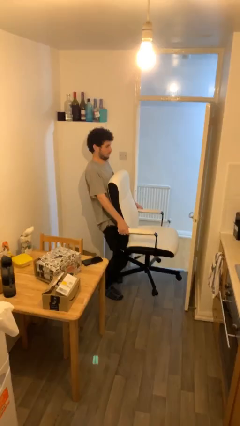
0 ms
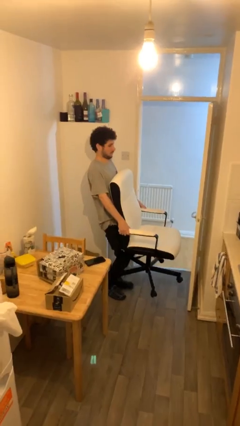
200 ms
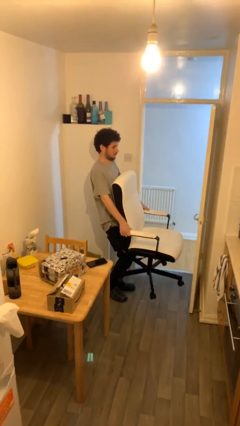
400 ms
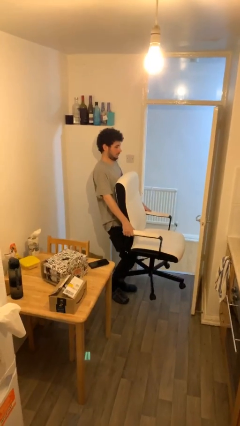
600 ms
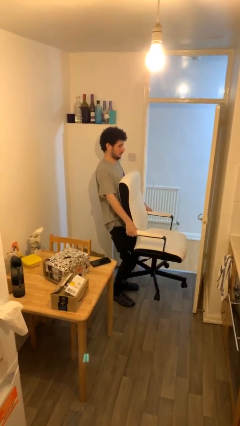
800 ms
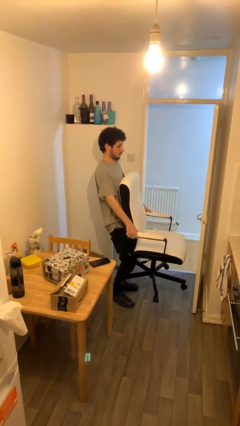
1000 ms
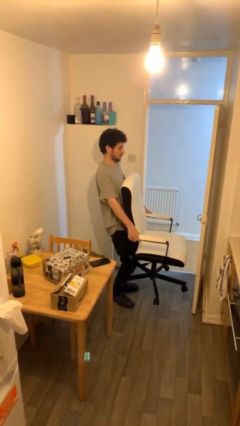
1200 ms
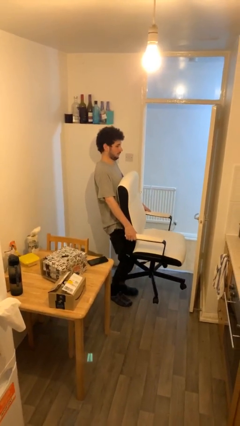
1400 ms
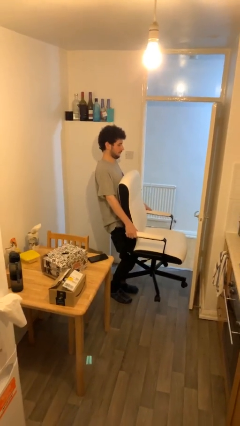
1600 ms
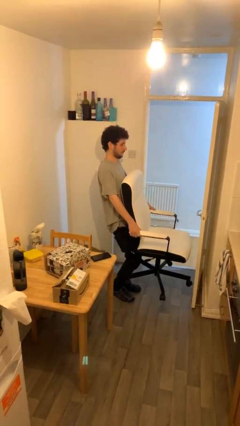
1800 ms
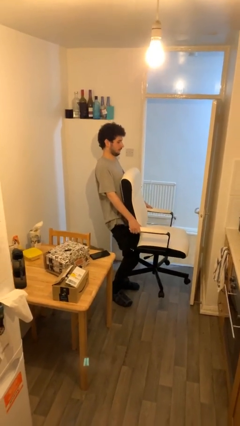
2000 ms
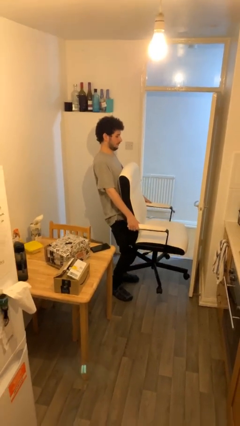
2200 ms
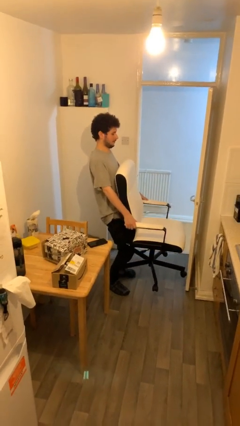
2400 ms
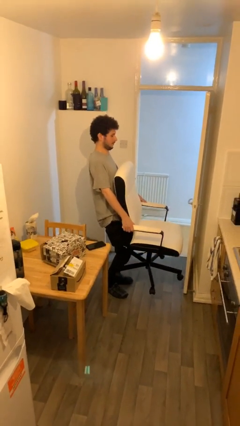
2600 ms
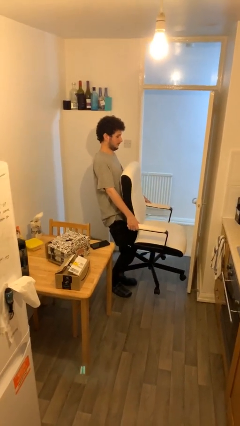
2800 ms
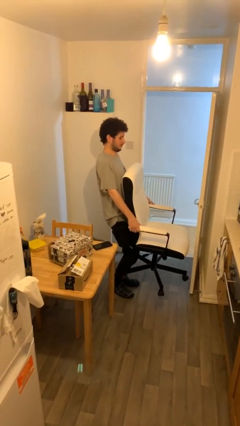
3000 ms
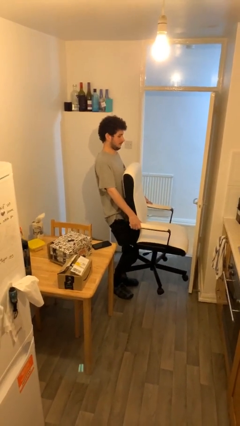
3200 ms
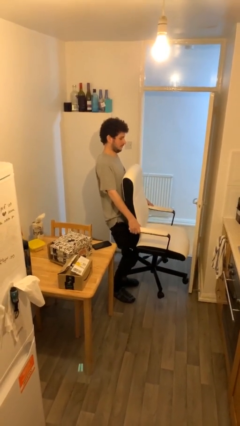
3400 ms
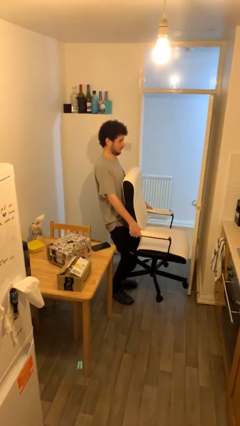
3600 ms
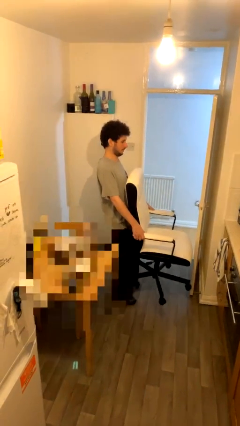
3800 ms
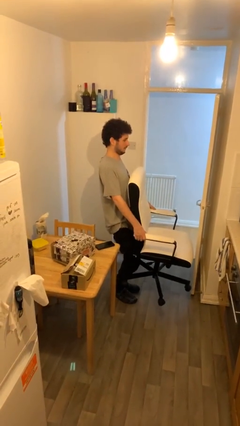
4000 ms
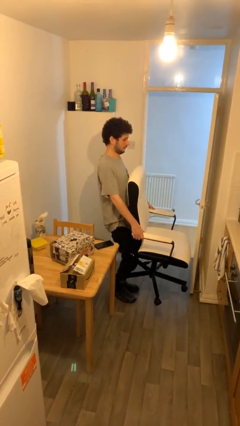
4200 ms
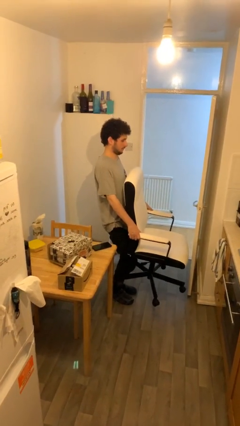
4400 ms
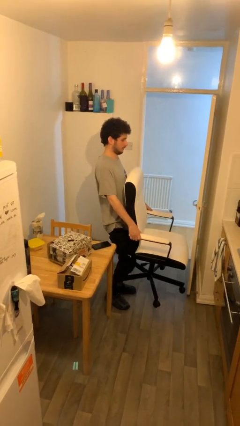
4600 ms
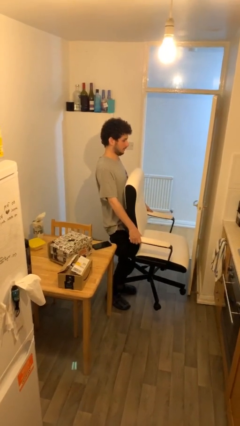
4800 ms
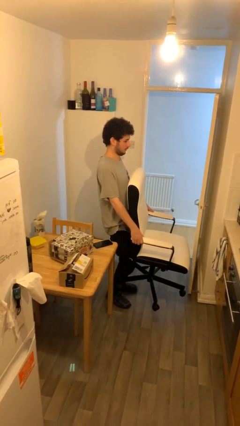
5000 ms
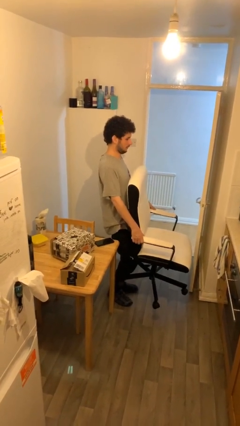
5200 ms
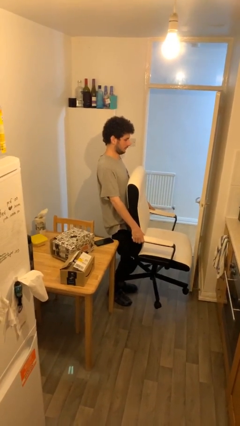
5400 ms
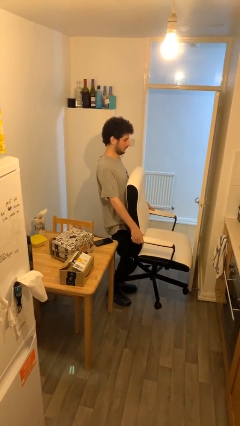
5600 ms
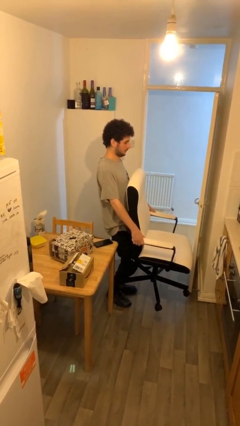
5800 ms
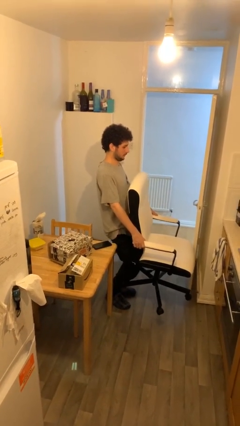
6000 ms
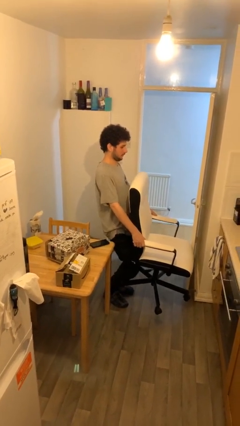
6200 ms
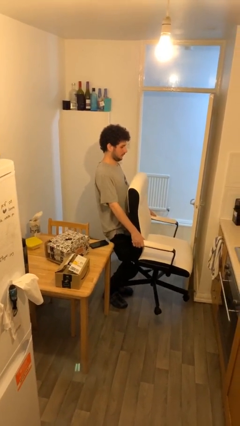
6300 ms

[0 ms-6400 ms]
person carries heavy object

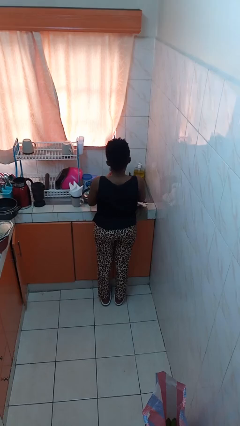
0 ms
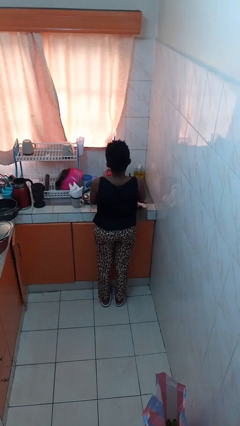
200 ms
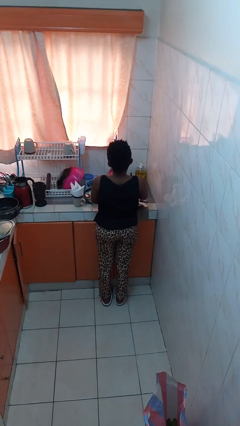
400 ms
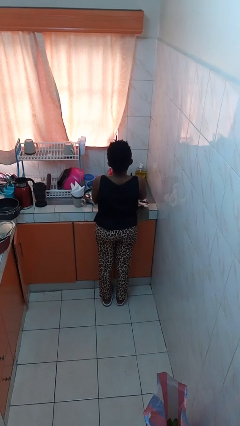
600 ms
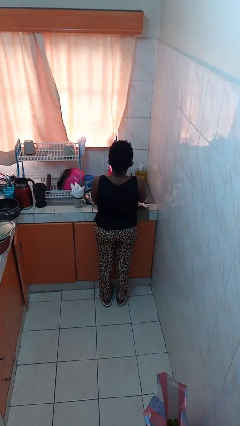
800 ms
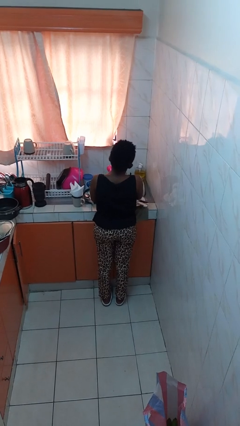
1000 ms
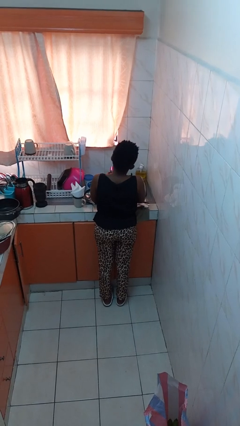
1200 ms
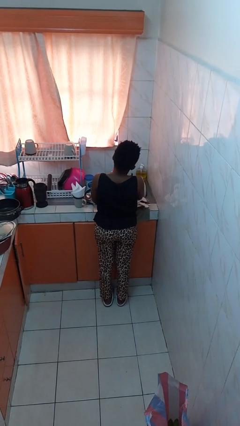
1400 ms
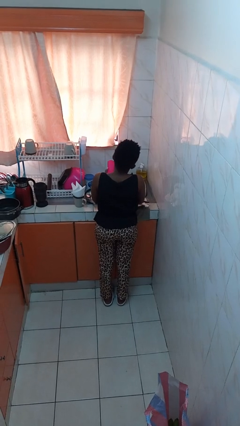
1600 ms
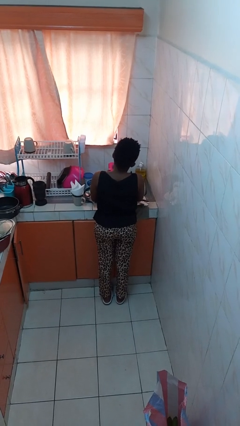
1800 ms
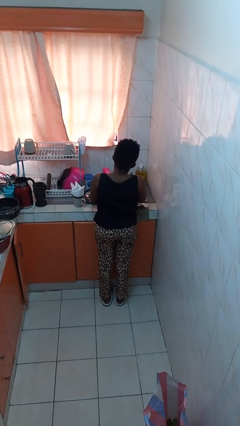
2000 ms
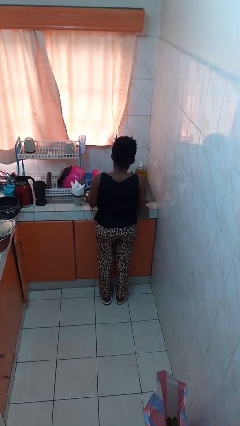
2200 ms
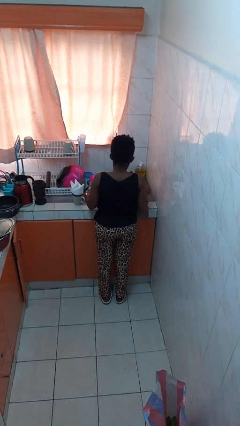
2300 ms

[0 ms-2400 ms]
person washes dish

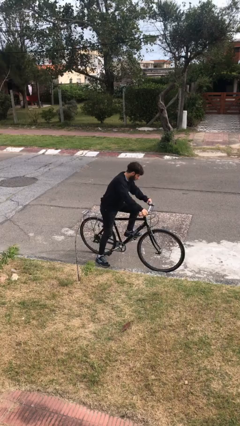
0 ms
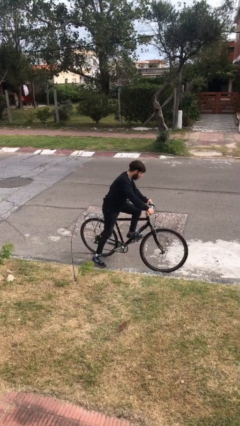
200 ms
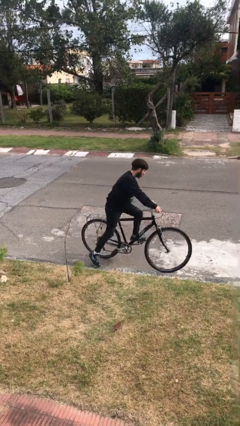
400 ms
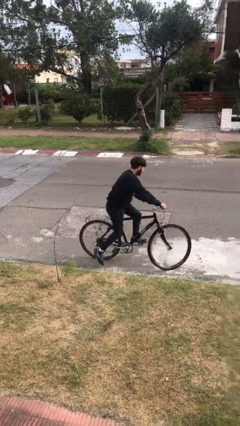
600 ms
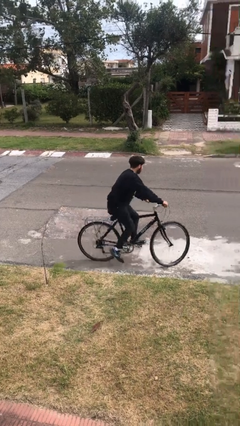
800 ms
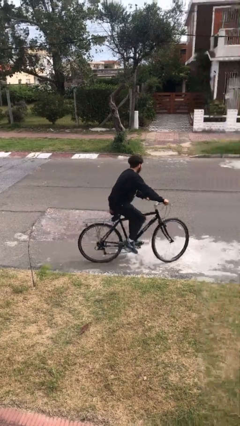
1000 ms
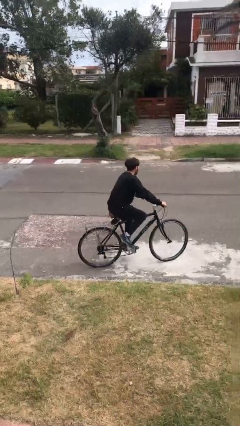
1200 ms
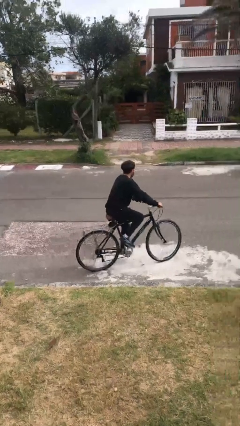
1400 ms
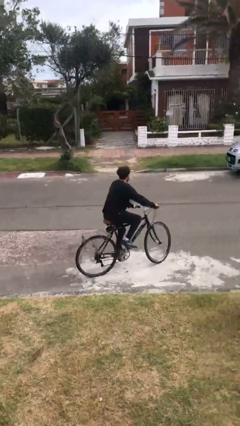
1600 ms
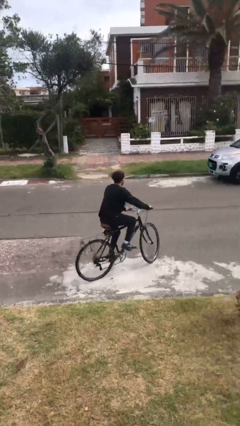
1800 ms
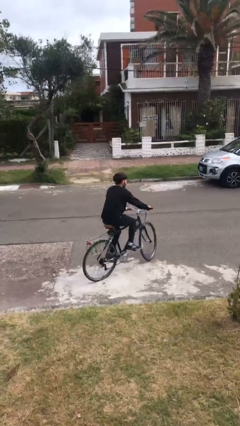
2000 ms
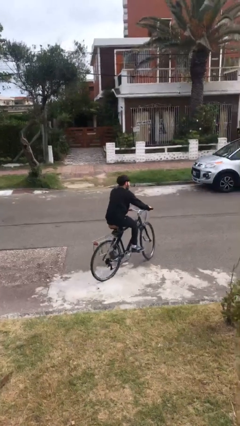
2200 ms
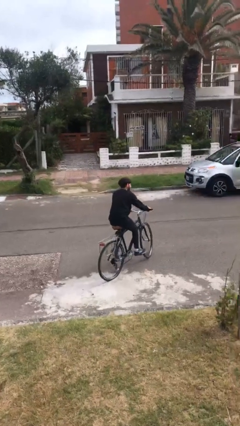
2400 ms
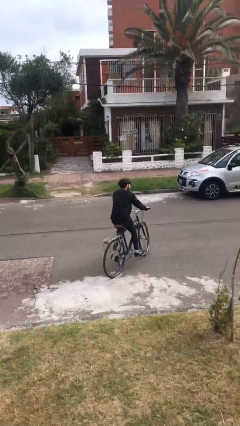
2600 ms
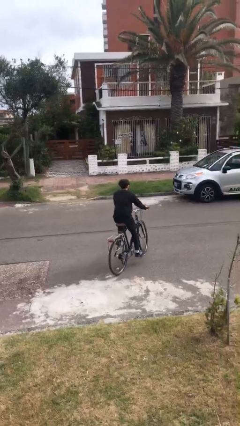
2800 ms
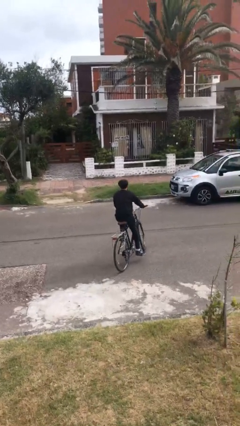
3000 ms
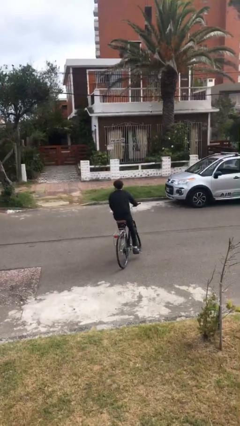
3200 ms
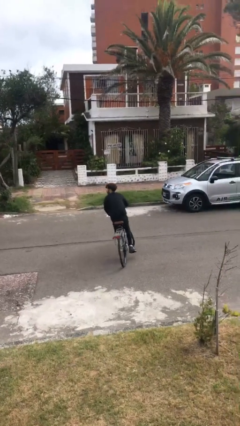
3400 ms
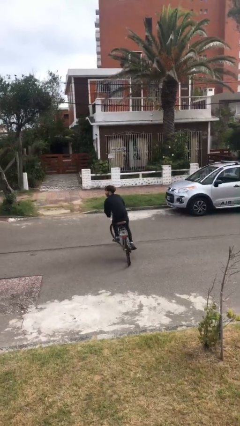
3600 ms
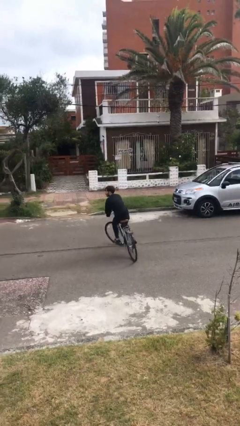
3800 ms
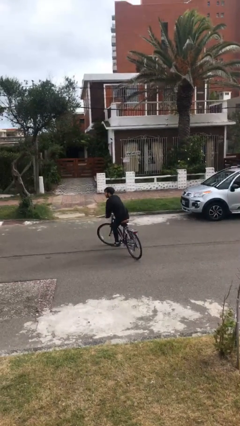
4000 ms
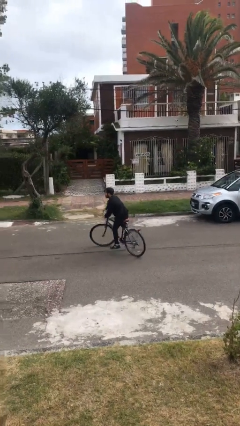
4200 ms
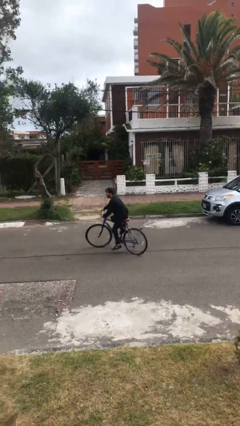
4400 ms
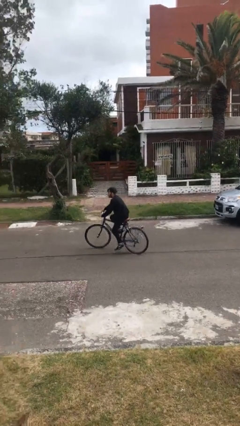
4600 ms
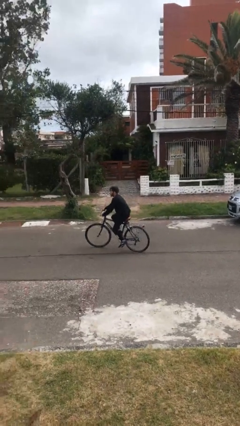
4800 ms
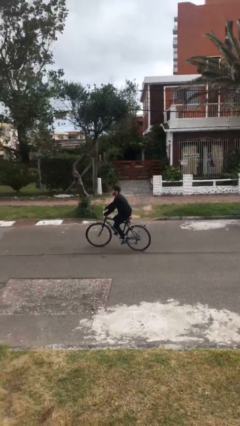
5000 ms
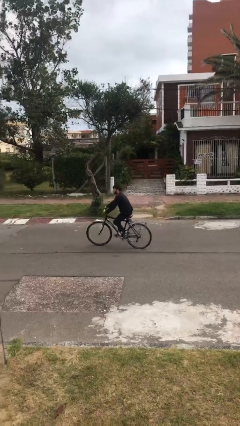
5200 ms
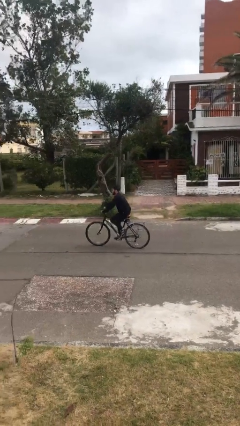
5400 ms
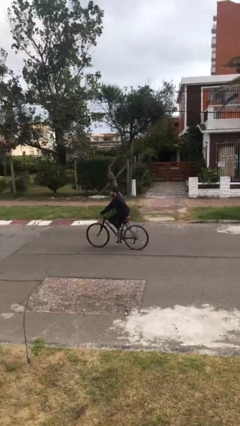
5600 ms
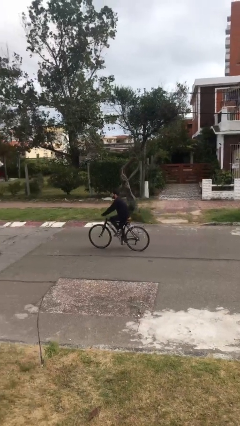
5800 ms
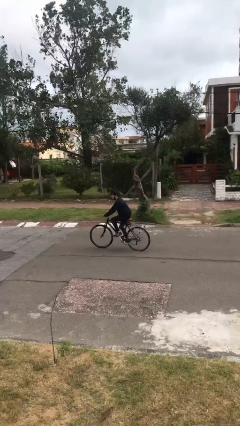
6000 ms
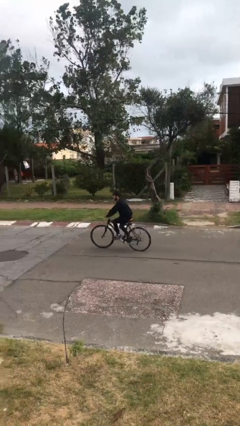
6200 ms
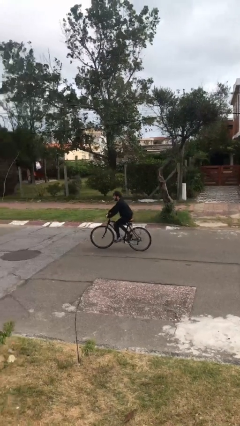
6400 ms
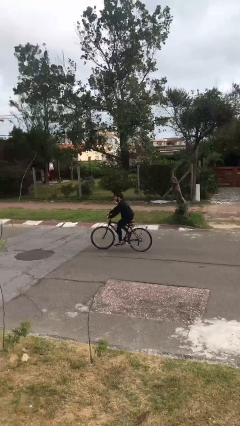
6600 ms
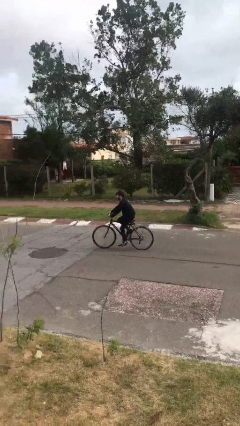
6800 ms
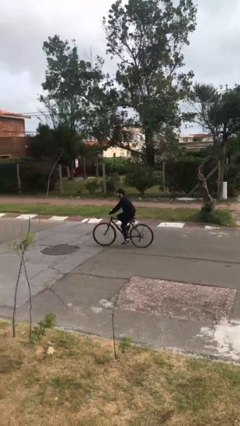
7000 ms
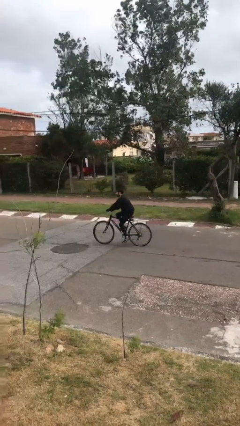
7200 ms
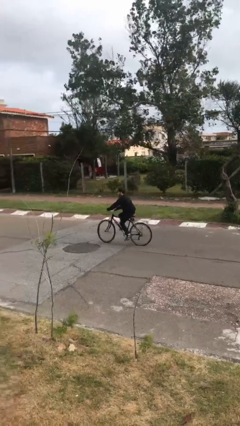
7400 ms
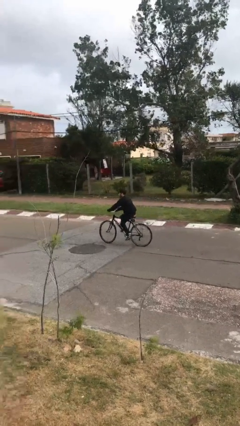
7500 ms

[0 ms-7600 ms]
person rides bicycle

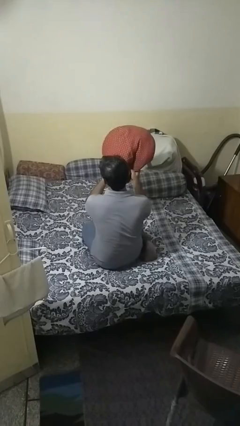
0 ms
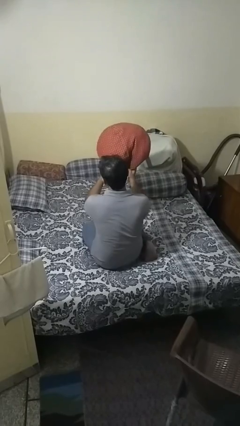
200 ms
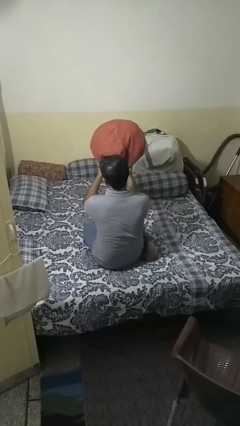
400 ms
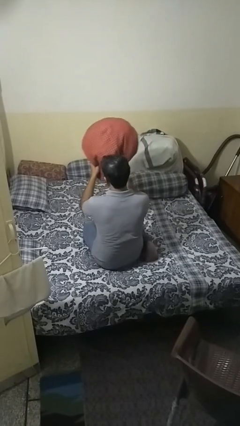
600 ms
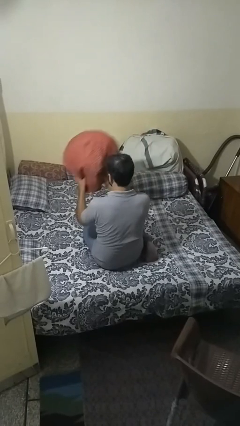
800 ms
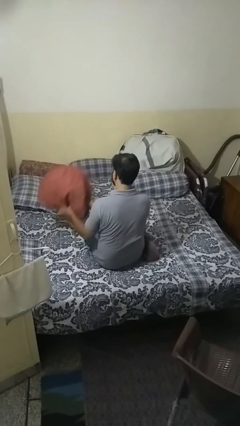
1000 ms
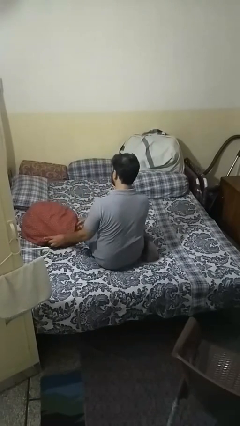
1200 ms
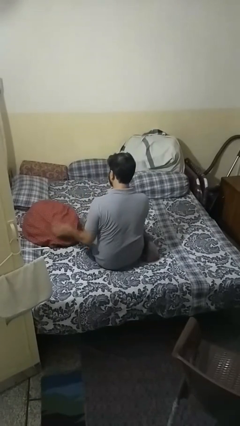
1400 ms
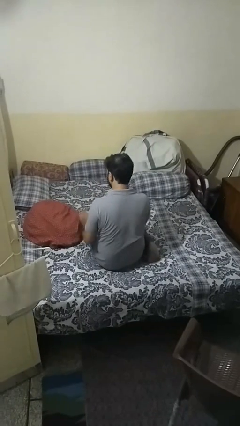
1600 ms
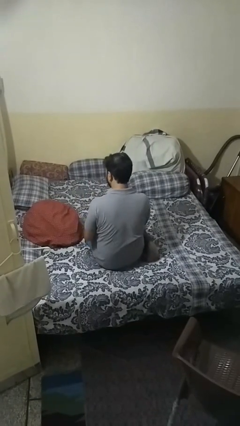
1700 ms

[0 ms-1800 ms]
person puts down object on bed

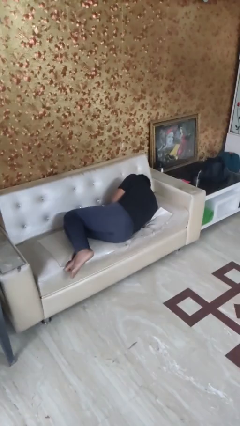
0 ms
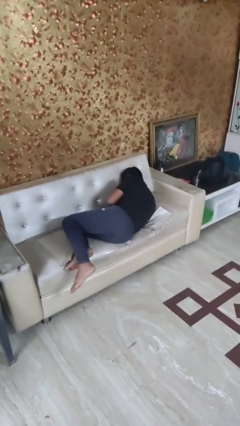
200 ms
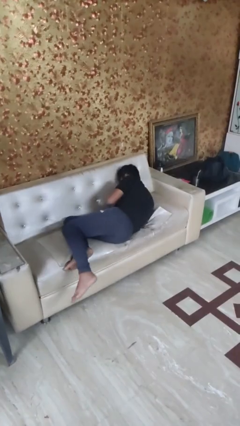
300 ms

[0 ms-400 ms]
person lies down on couch
